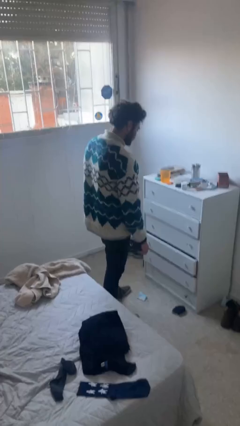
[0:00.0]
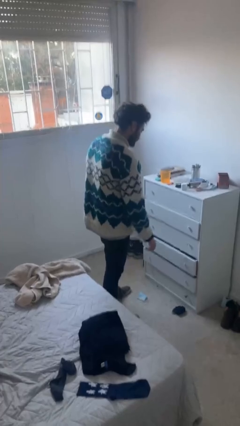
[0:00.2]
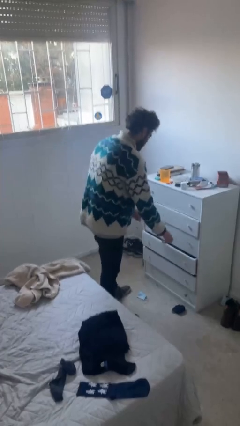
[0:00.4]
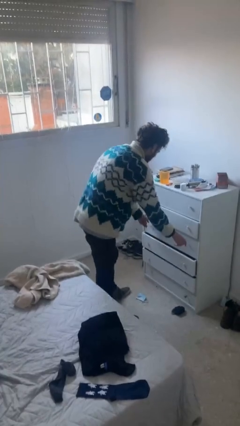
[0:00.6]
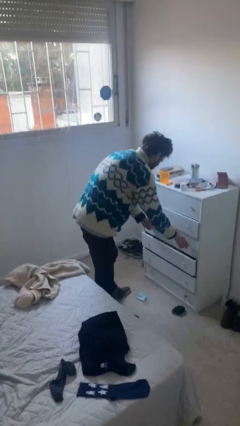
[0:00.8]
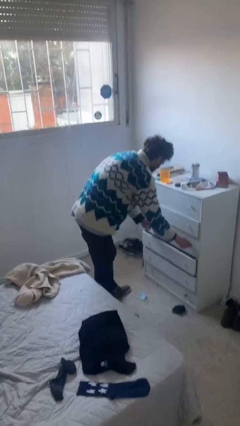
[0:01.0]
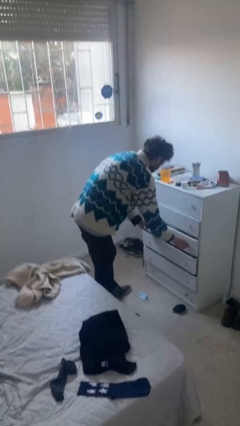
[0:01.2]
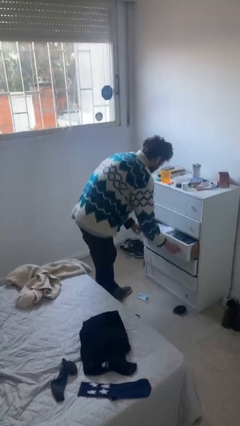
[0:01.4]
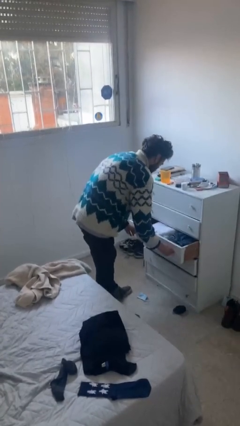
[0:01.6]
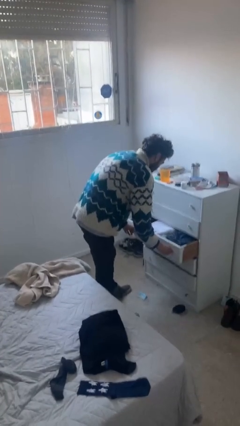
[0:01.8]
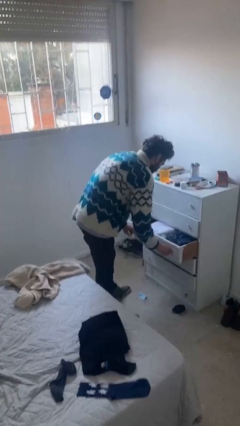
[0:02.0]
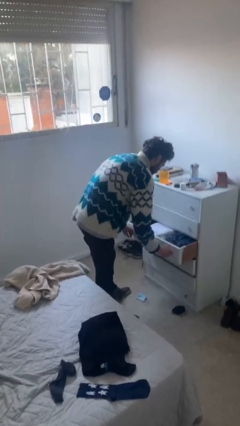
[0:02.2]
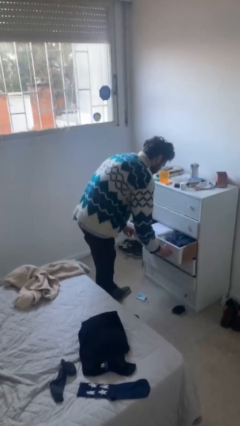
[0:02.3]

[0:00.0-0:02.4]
person opens dresser drawer

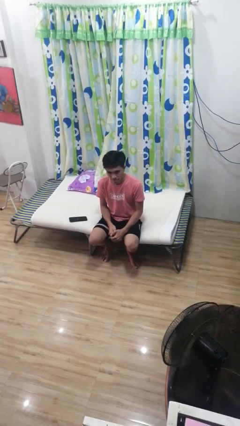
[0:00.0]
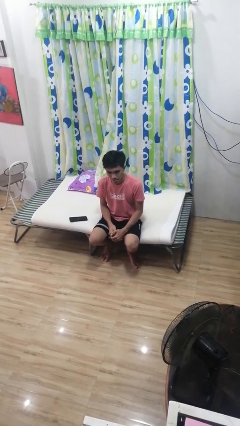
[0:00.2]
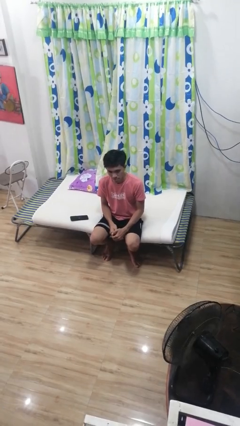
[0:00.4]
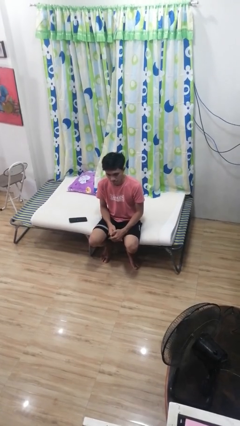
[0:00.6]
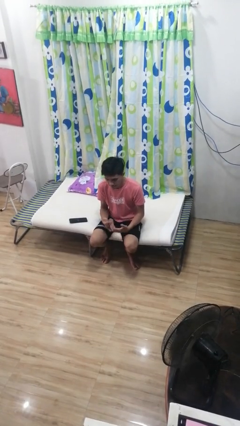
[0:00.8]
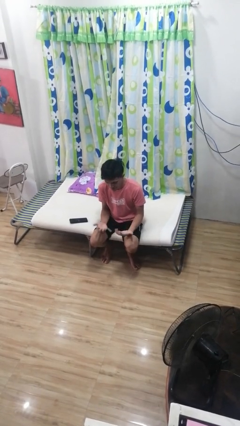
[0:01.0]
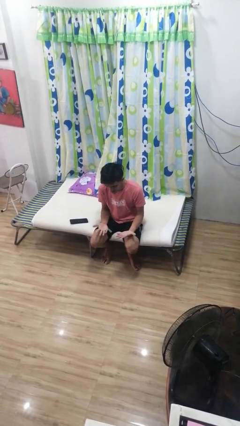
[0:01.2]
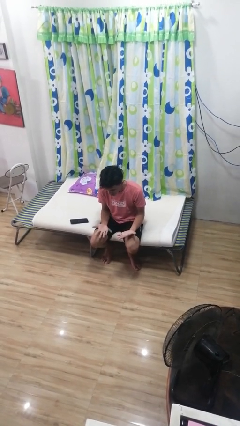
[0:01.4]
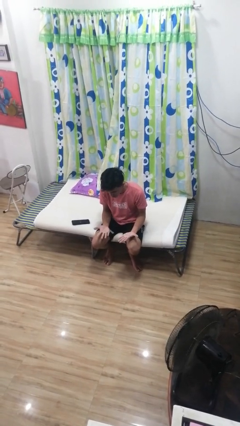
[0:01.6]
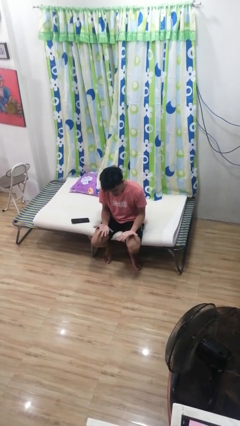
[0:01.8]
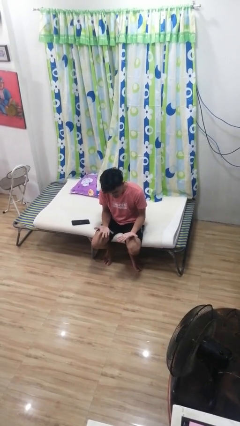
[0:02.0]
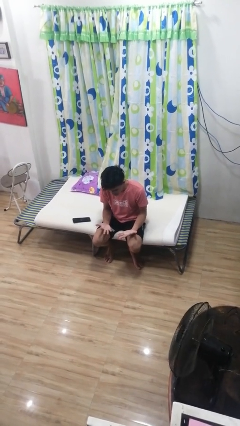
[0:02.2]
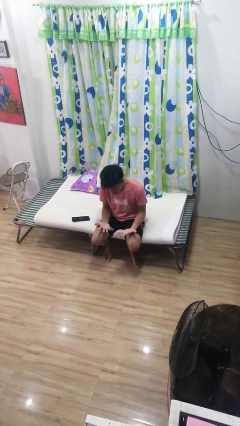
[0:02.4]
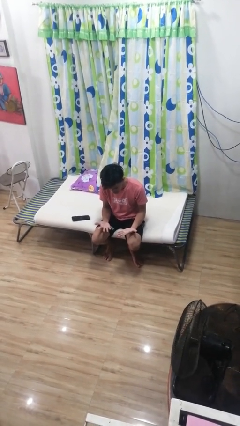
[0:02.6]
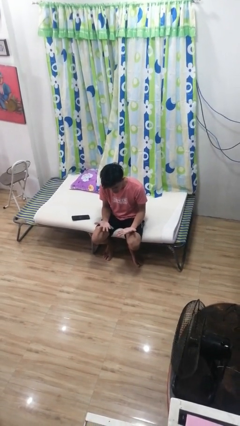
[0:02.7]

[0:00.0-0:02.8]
person looks at hands in lap

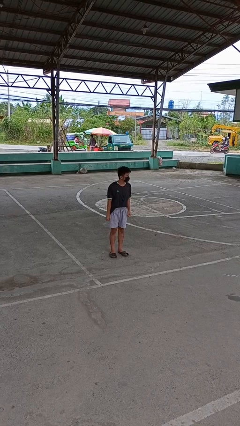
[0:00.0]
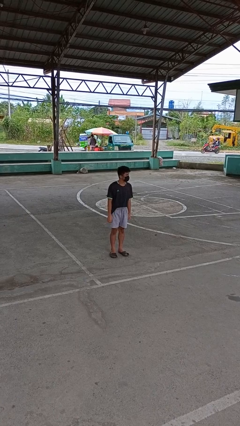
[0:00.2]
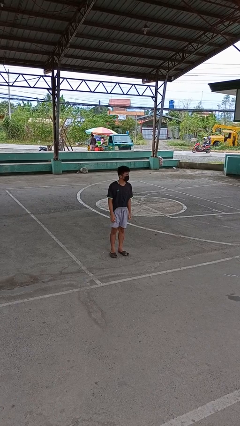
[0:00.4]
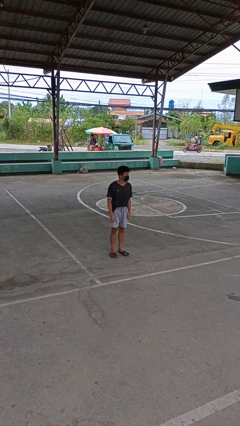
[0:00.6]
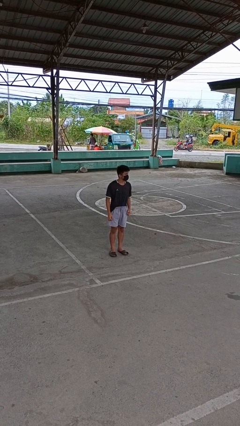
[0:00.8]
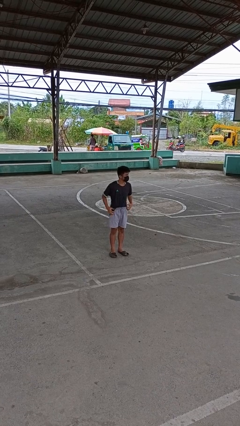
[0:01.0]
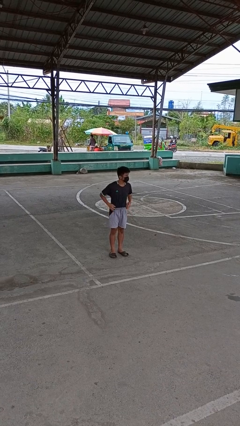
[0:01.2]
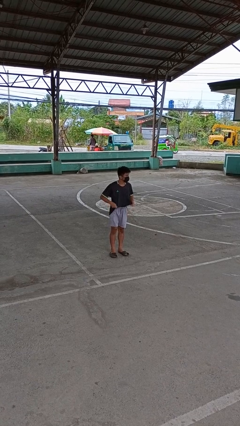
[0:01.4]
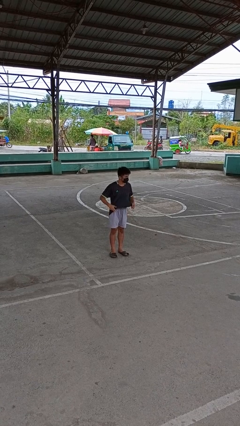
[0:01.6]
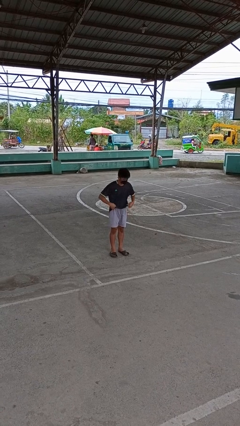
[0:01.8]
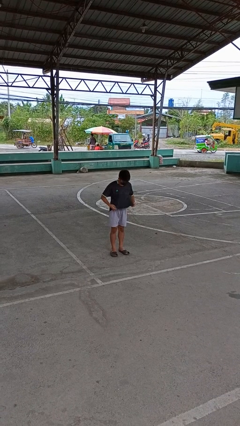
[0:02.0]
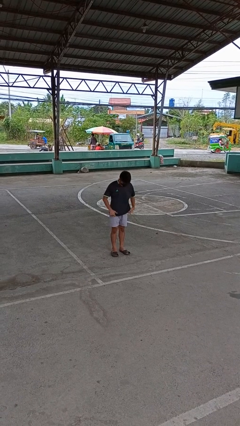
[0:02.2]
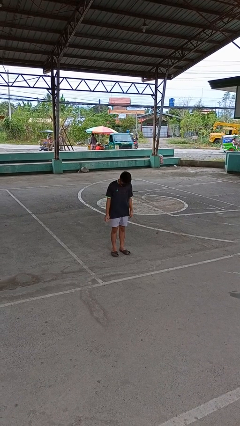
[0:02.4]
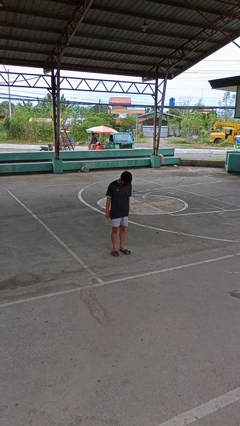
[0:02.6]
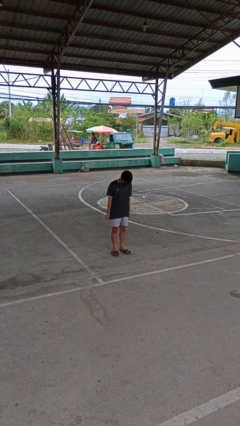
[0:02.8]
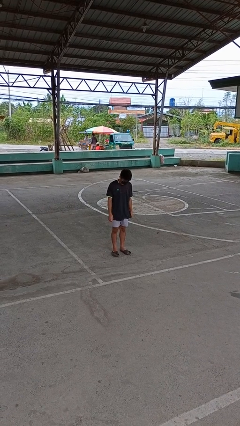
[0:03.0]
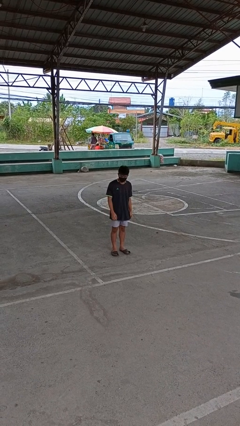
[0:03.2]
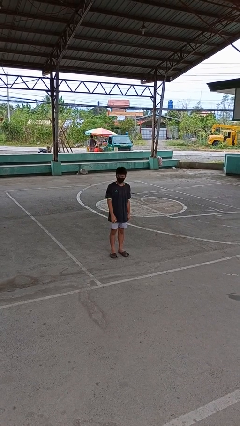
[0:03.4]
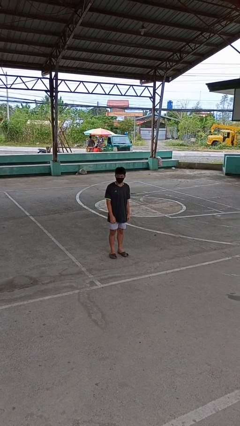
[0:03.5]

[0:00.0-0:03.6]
person untucks shirt

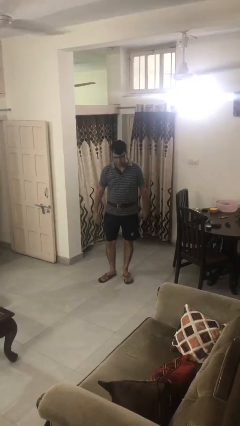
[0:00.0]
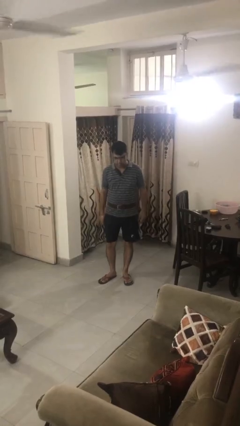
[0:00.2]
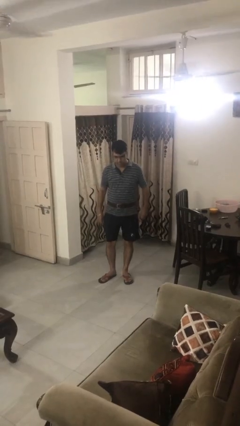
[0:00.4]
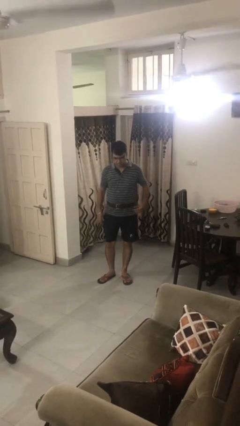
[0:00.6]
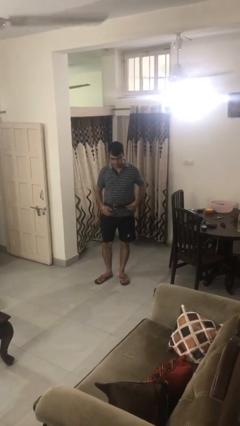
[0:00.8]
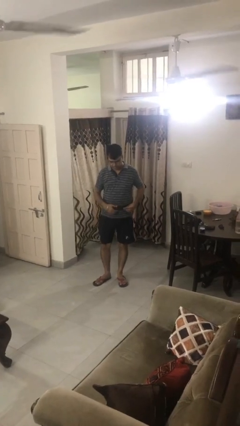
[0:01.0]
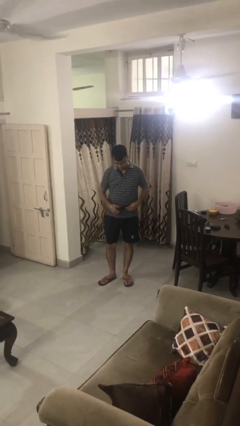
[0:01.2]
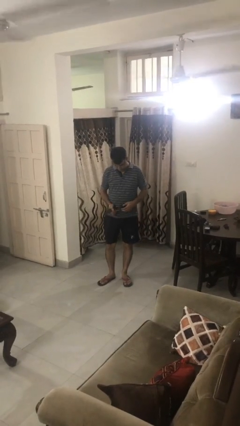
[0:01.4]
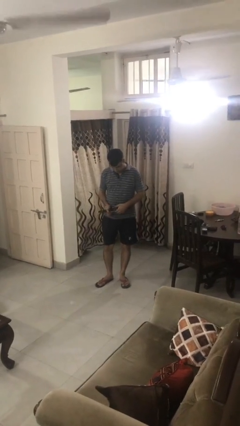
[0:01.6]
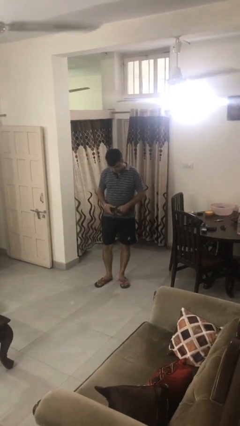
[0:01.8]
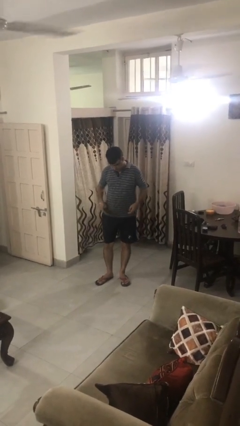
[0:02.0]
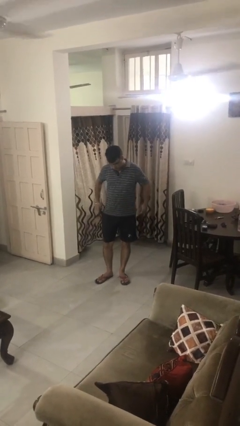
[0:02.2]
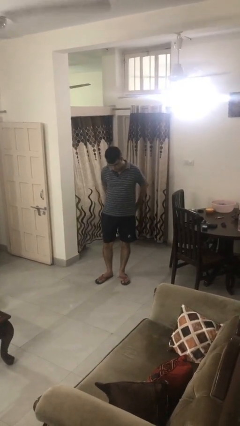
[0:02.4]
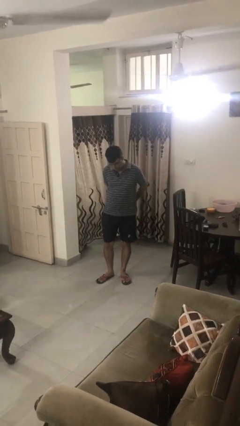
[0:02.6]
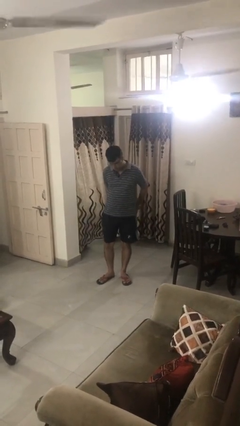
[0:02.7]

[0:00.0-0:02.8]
person takes off belt

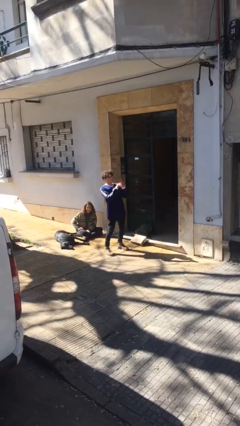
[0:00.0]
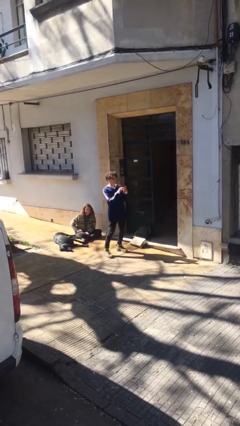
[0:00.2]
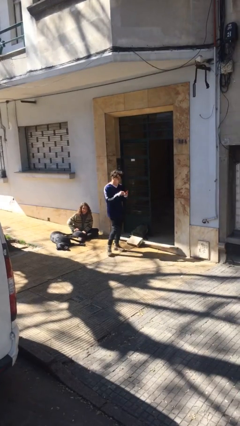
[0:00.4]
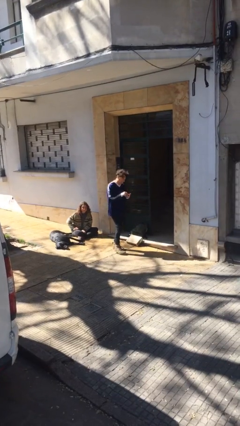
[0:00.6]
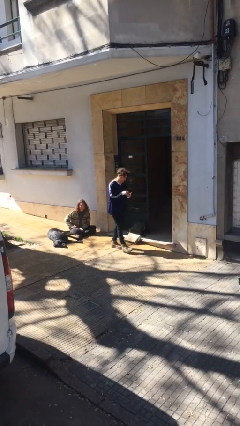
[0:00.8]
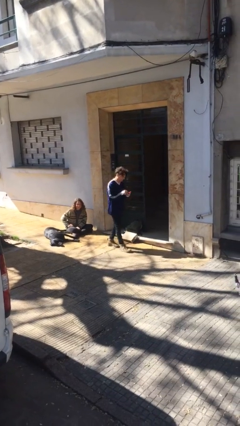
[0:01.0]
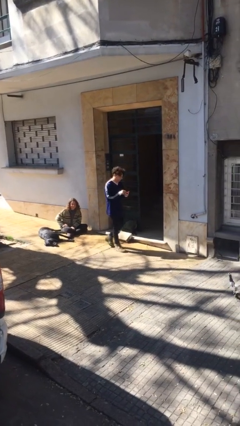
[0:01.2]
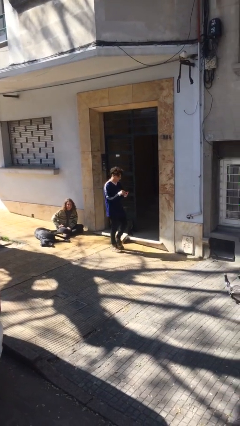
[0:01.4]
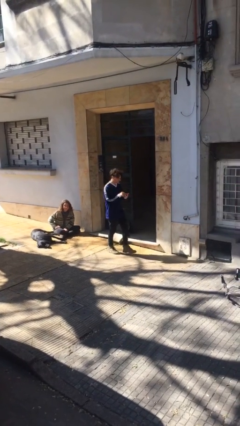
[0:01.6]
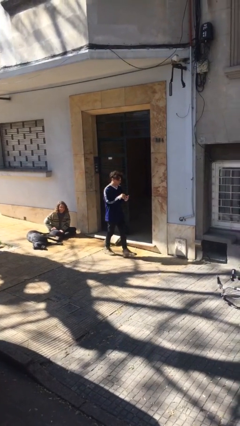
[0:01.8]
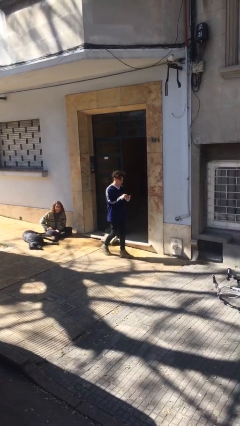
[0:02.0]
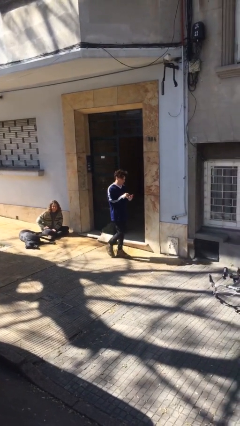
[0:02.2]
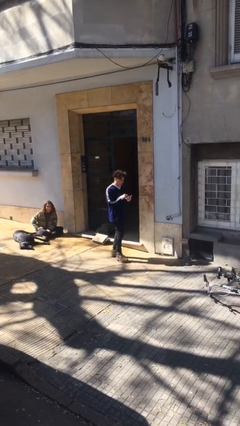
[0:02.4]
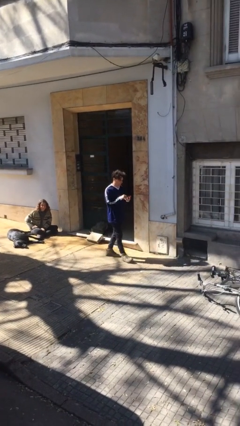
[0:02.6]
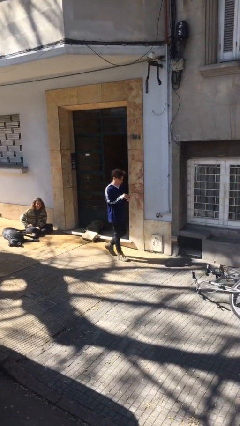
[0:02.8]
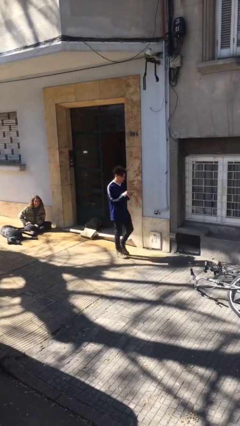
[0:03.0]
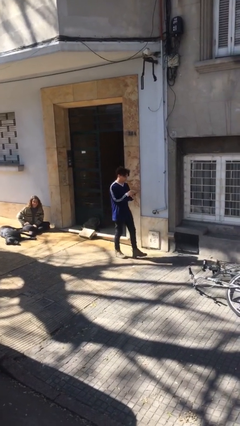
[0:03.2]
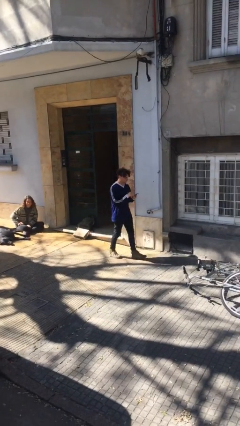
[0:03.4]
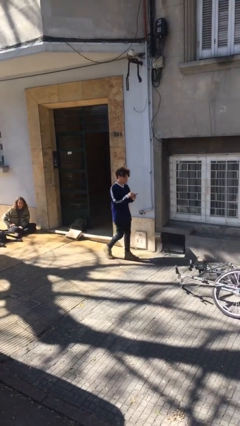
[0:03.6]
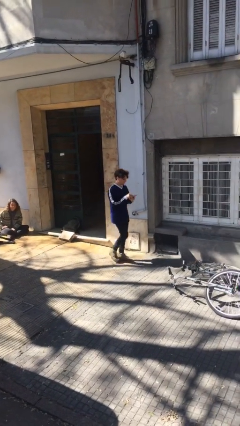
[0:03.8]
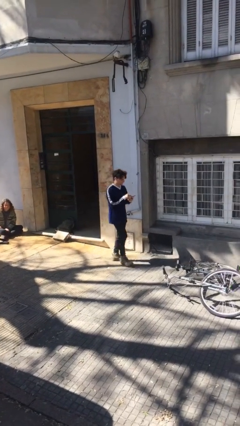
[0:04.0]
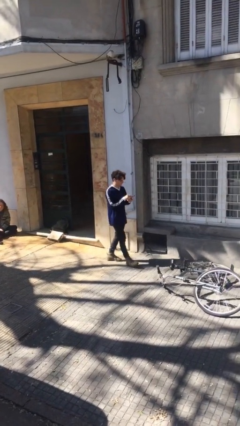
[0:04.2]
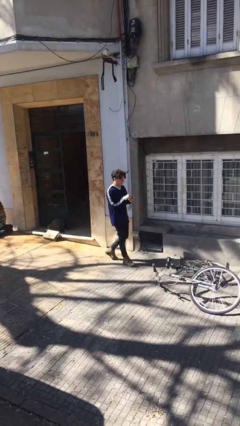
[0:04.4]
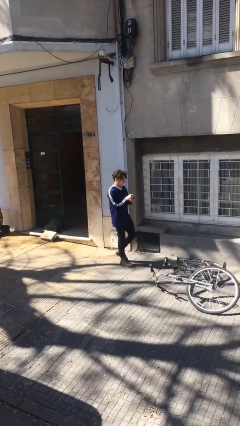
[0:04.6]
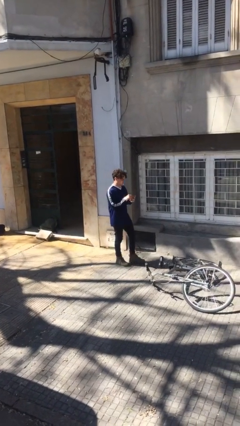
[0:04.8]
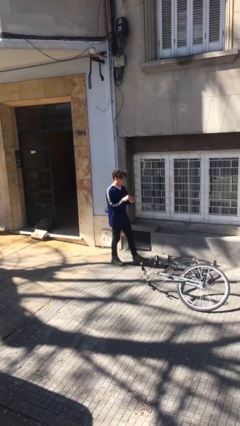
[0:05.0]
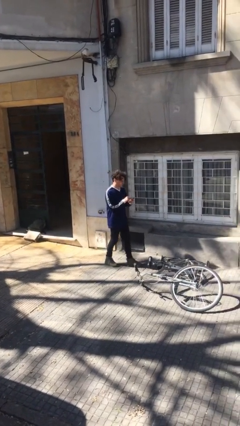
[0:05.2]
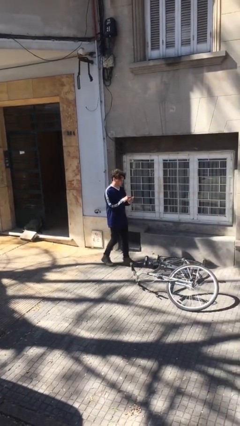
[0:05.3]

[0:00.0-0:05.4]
person texts on phone

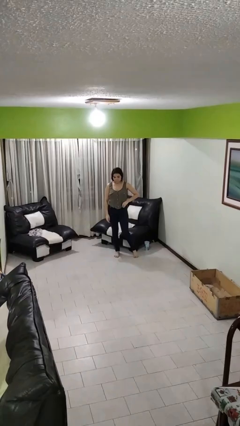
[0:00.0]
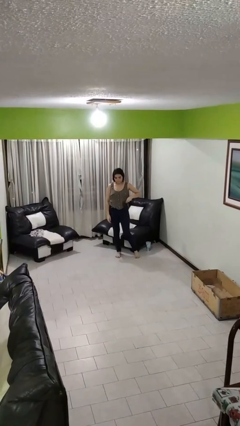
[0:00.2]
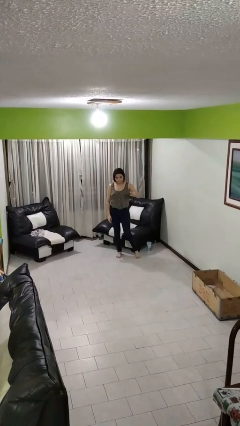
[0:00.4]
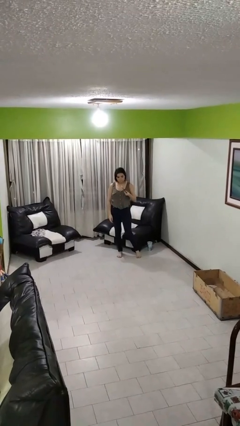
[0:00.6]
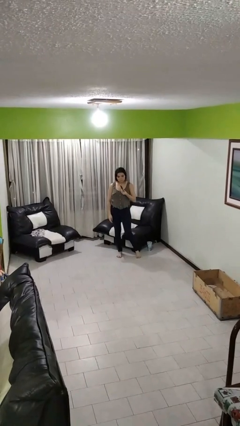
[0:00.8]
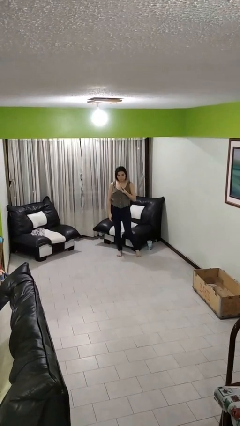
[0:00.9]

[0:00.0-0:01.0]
person takes phone from pocket
